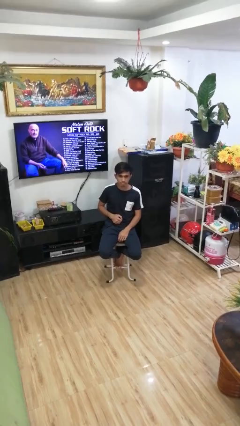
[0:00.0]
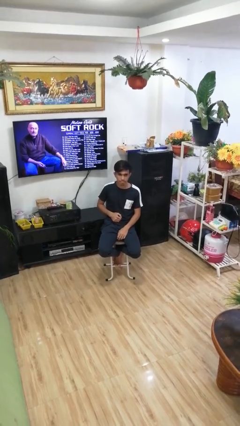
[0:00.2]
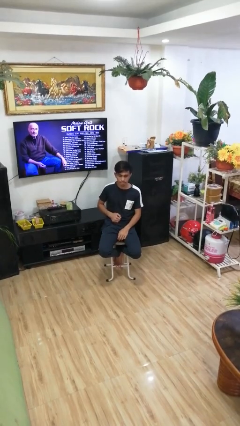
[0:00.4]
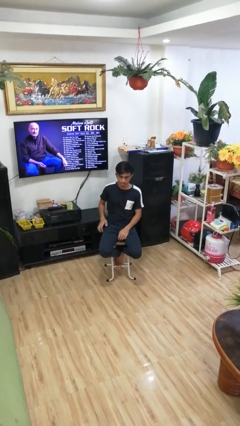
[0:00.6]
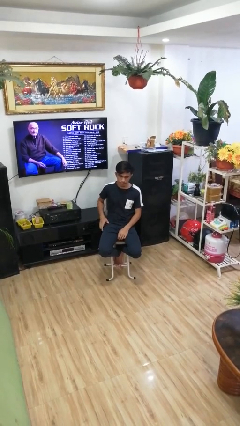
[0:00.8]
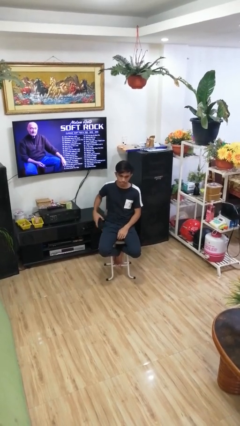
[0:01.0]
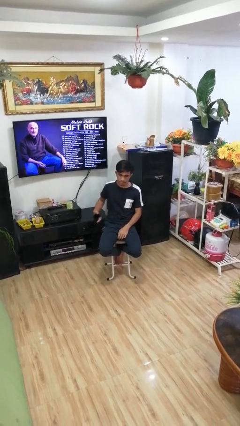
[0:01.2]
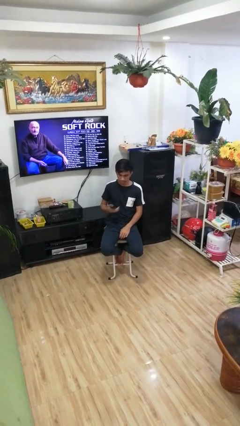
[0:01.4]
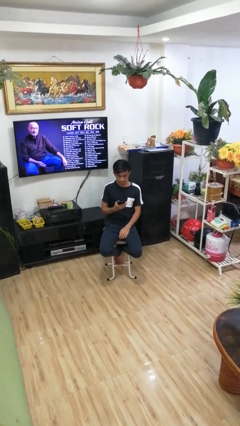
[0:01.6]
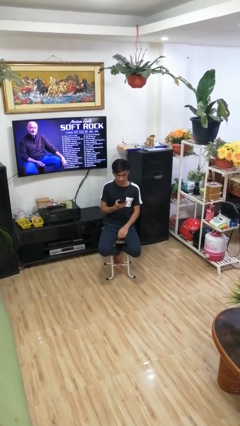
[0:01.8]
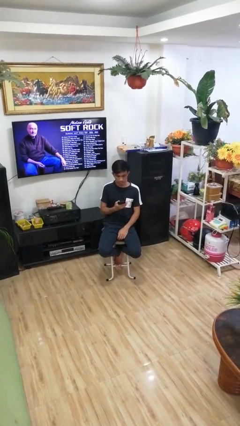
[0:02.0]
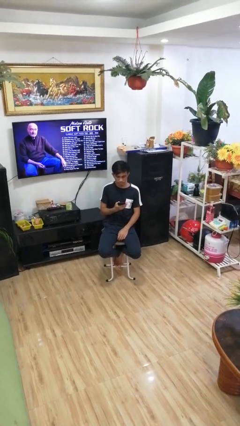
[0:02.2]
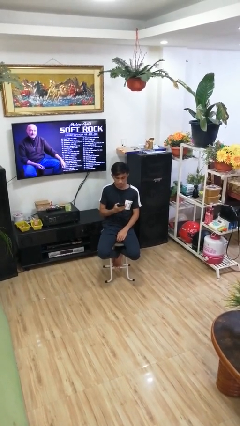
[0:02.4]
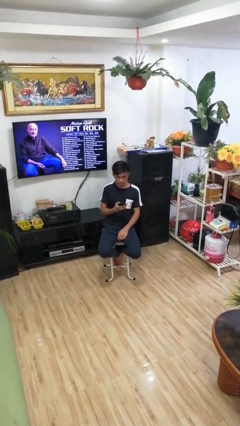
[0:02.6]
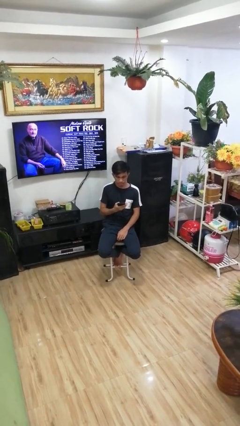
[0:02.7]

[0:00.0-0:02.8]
person takes phone from pocket

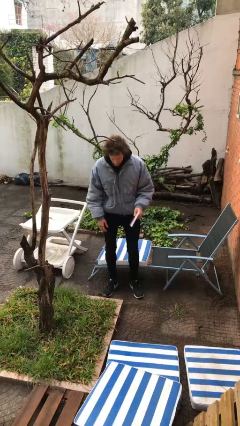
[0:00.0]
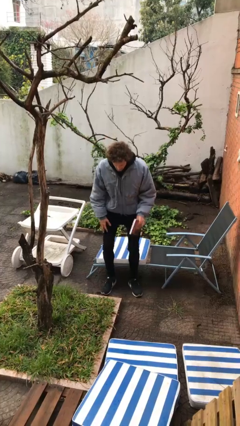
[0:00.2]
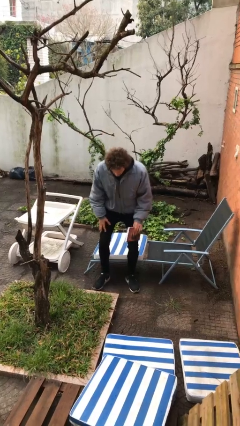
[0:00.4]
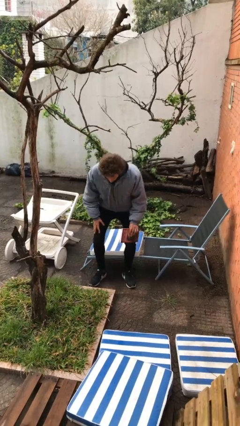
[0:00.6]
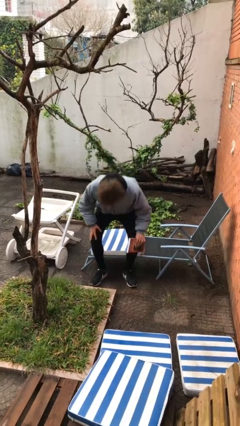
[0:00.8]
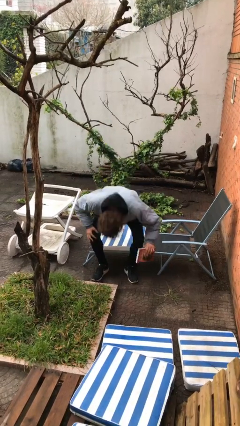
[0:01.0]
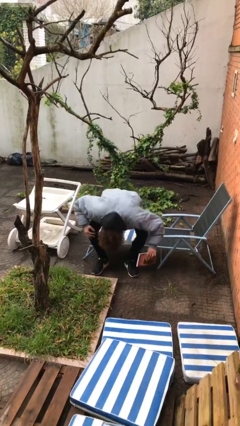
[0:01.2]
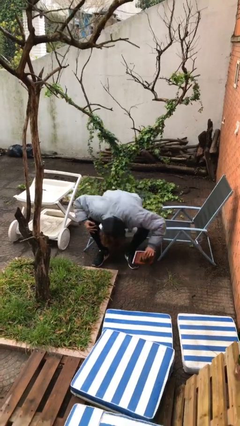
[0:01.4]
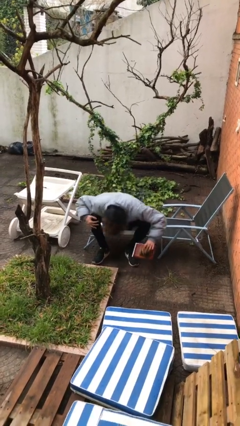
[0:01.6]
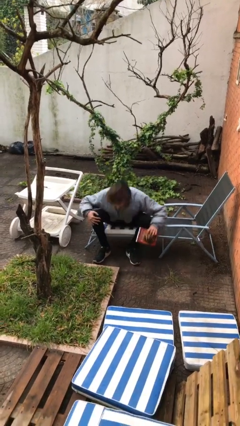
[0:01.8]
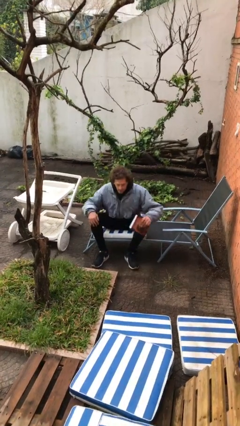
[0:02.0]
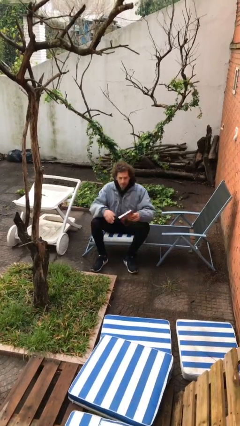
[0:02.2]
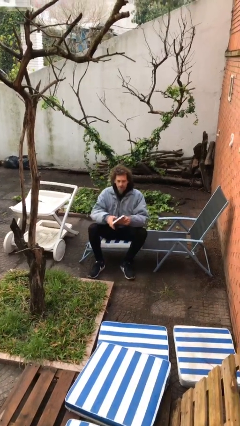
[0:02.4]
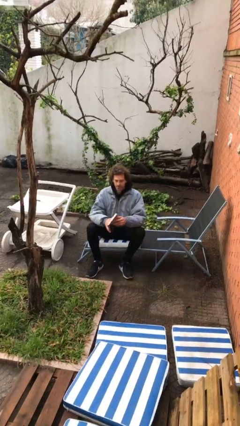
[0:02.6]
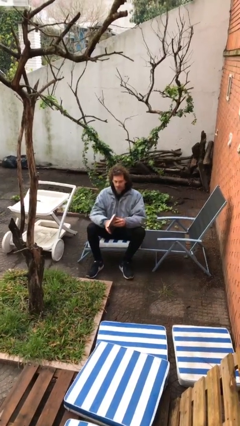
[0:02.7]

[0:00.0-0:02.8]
person sits down

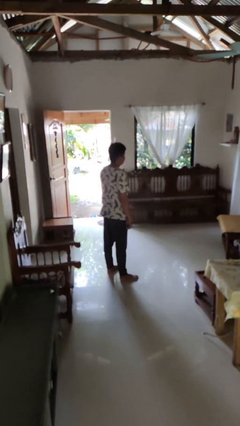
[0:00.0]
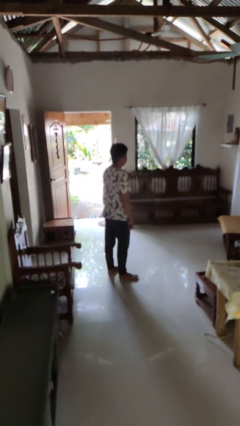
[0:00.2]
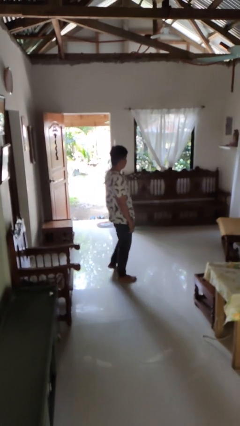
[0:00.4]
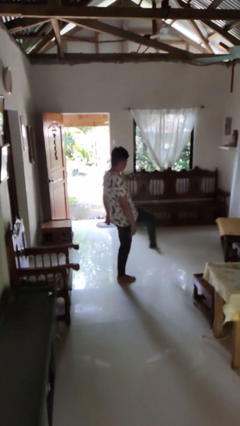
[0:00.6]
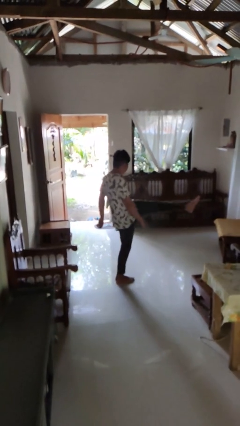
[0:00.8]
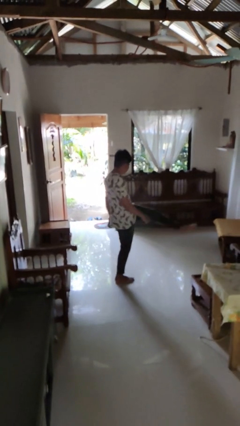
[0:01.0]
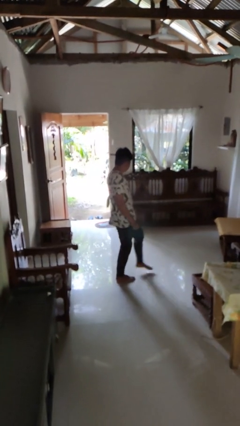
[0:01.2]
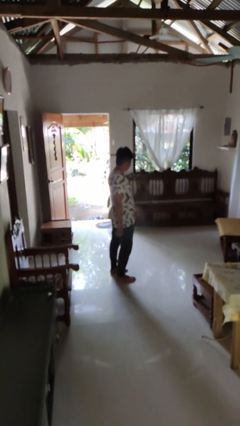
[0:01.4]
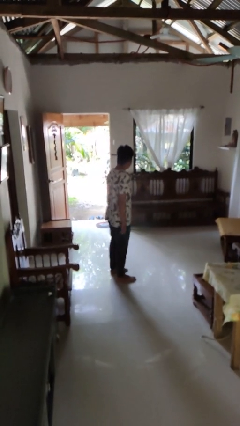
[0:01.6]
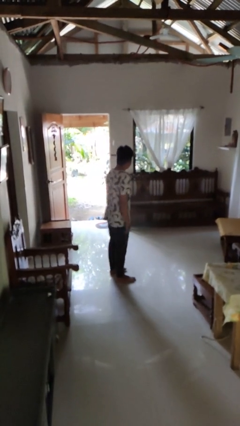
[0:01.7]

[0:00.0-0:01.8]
person karate kicks

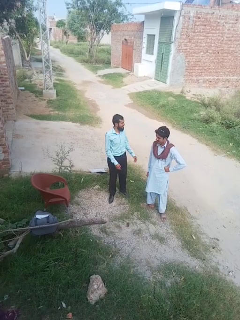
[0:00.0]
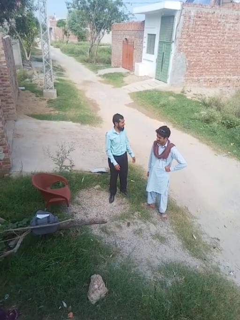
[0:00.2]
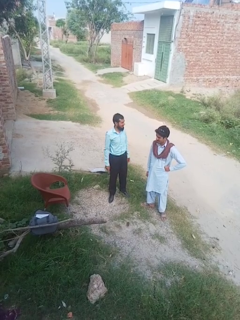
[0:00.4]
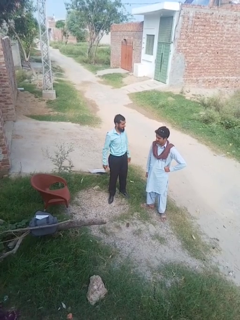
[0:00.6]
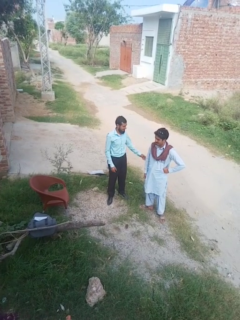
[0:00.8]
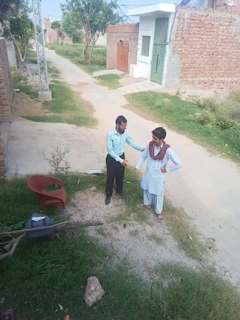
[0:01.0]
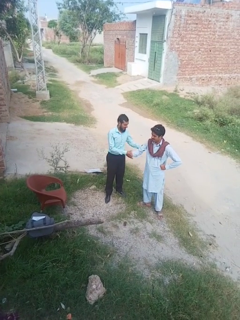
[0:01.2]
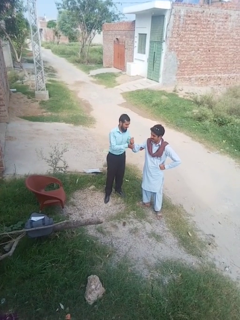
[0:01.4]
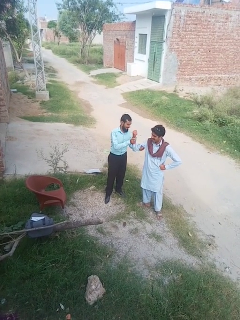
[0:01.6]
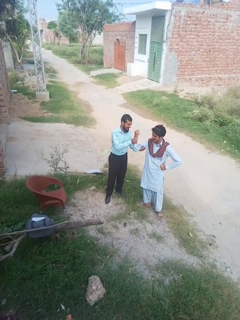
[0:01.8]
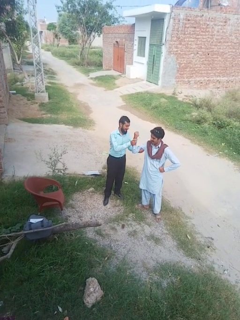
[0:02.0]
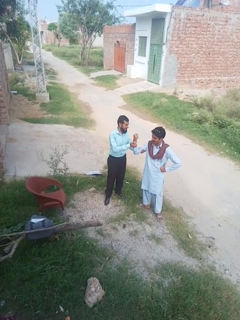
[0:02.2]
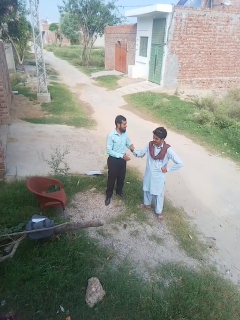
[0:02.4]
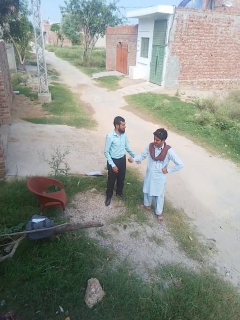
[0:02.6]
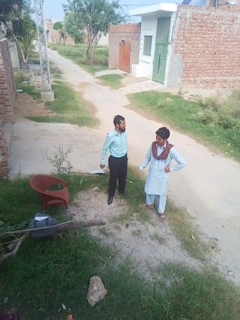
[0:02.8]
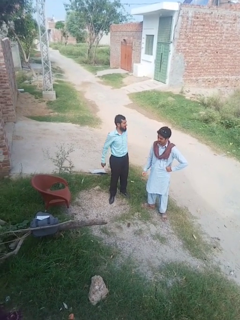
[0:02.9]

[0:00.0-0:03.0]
person grabs person by bicep

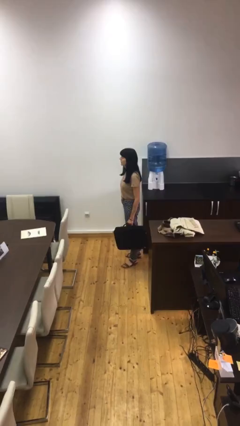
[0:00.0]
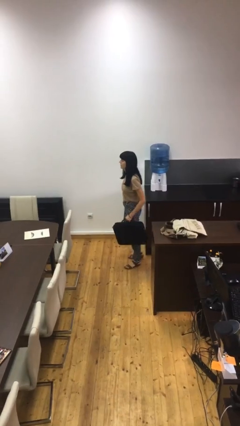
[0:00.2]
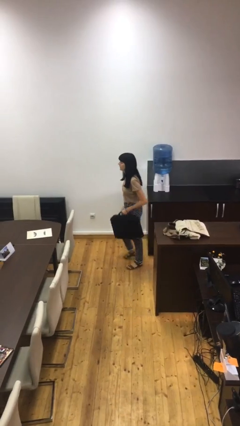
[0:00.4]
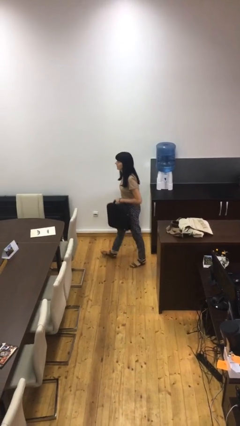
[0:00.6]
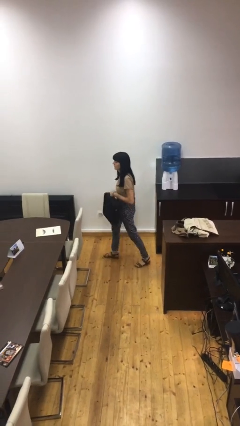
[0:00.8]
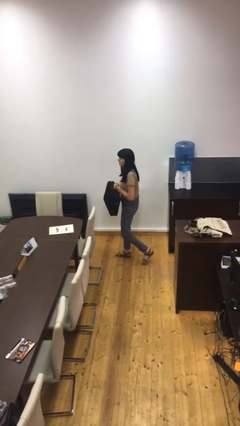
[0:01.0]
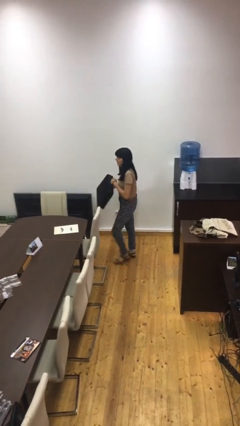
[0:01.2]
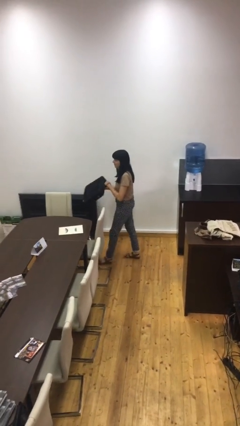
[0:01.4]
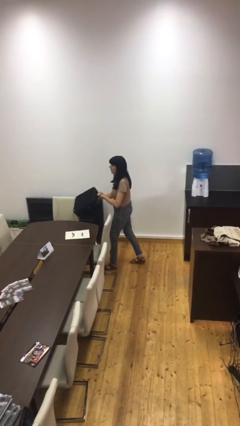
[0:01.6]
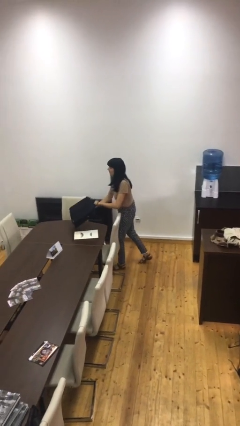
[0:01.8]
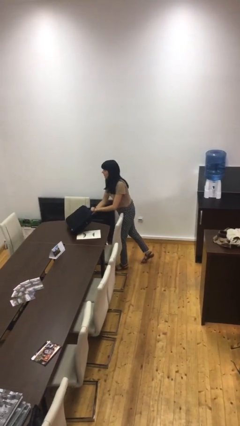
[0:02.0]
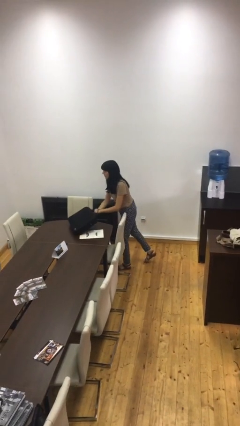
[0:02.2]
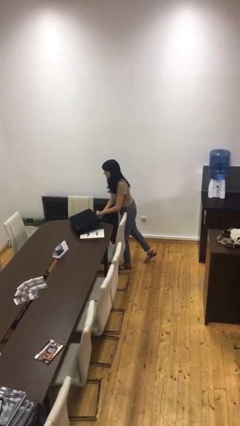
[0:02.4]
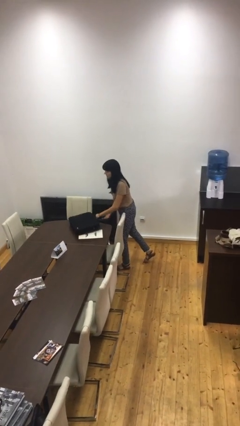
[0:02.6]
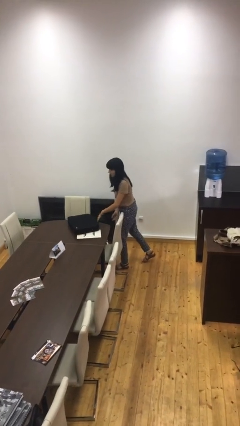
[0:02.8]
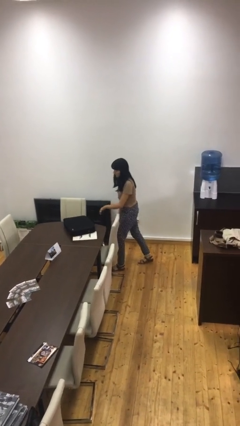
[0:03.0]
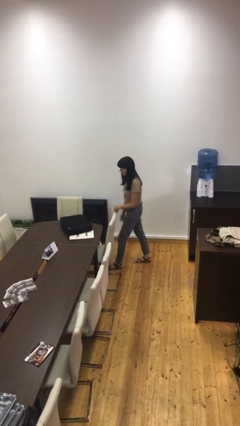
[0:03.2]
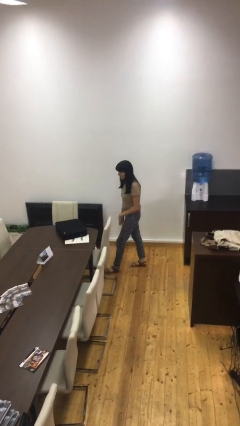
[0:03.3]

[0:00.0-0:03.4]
person puts down object on table

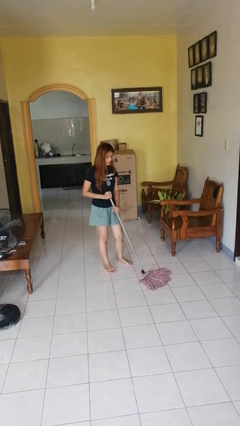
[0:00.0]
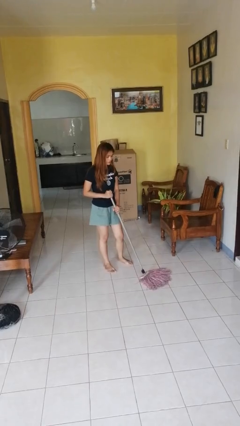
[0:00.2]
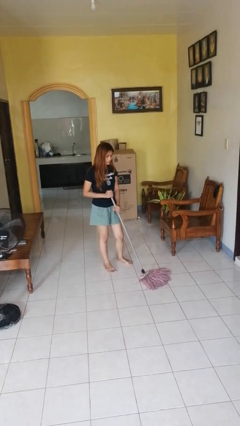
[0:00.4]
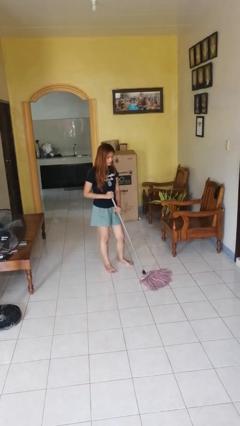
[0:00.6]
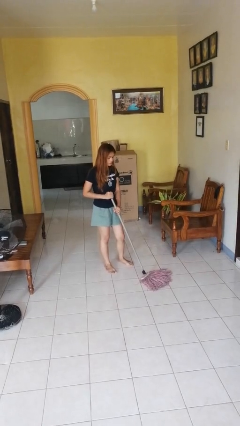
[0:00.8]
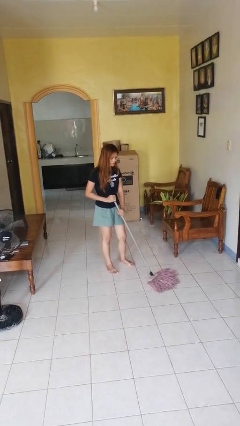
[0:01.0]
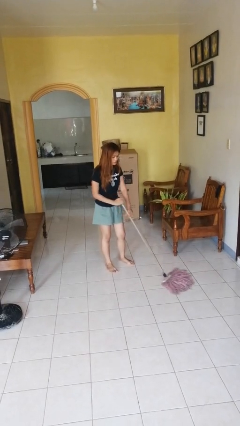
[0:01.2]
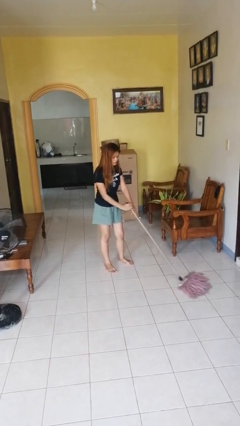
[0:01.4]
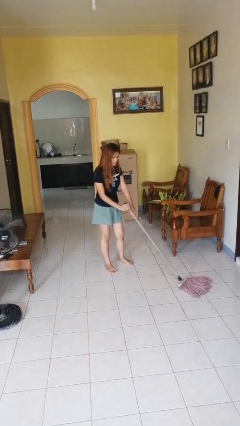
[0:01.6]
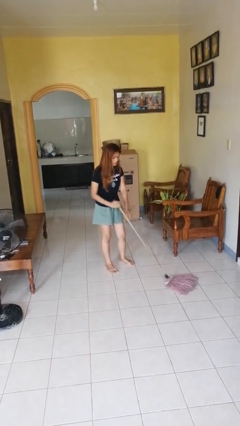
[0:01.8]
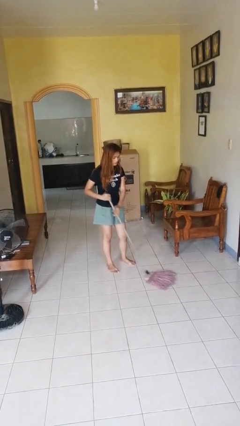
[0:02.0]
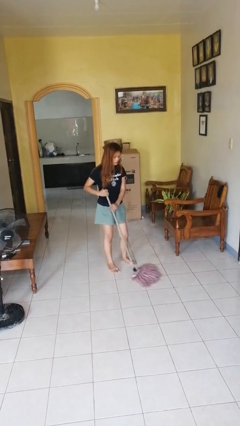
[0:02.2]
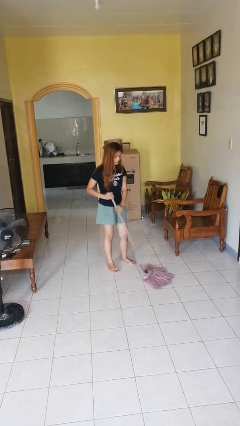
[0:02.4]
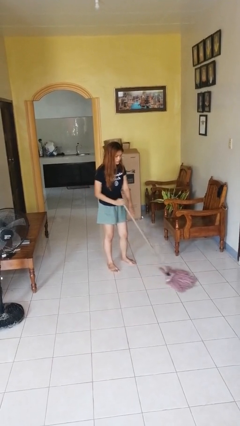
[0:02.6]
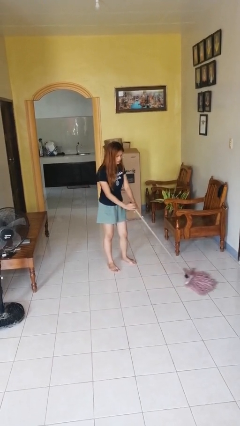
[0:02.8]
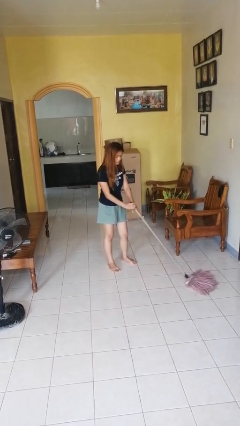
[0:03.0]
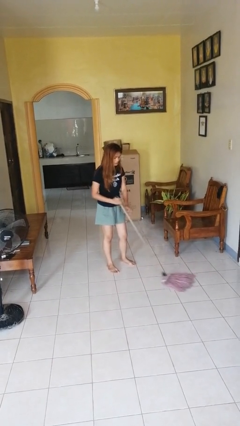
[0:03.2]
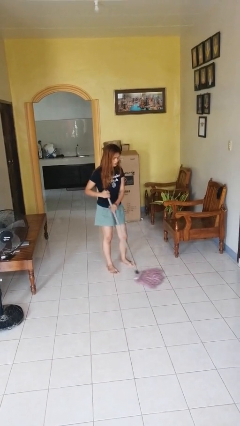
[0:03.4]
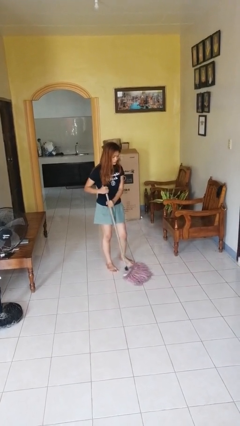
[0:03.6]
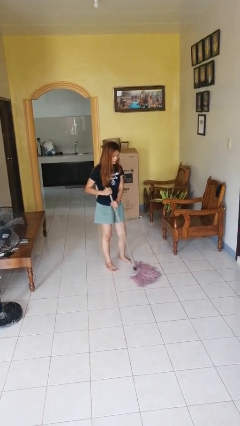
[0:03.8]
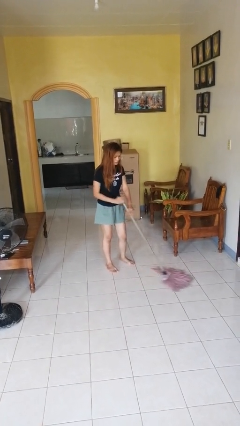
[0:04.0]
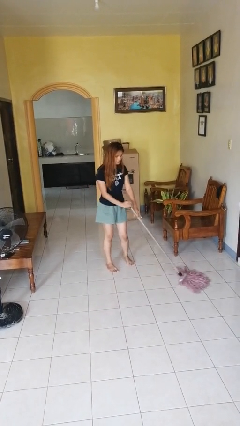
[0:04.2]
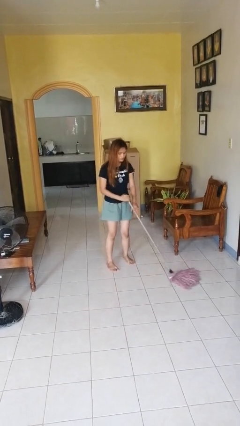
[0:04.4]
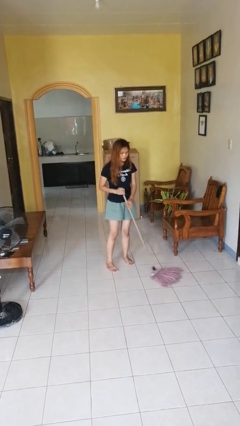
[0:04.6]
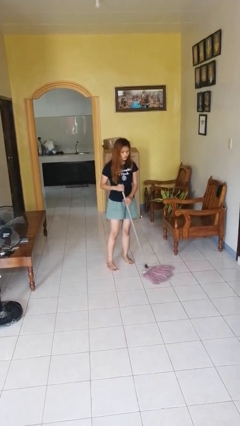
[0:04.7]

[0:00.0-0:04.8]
person mops
